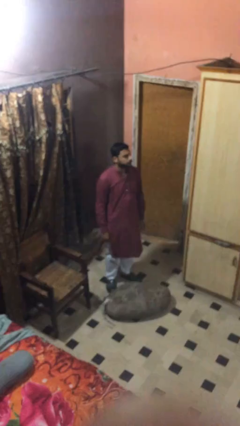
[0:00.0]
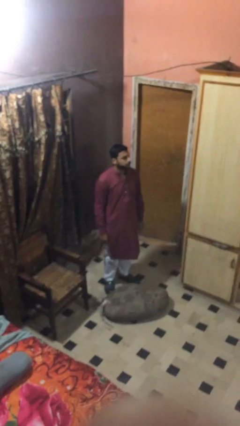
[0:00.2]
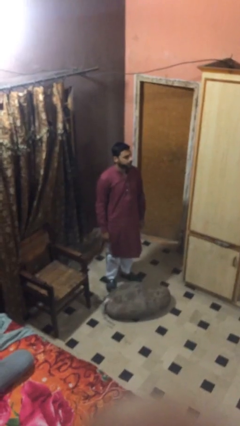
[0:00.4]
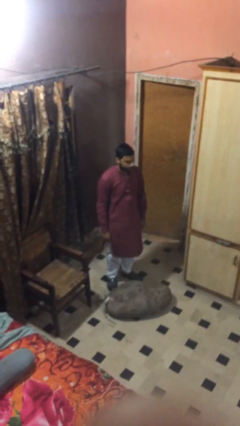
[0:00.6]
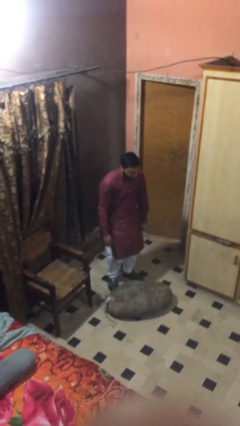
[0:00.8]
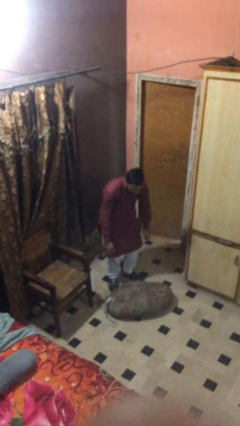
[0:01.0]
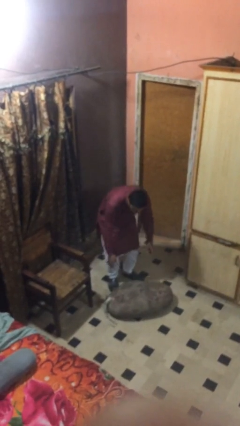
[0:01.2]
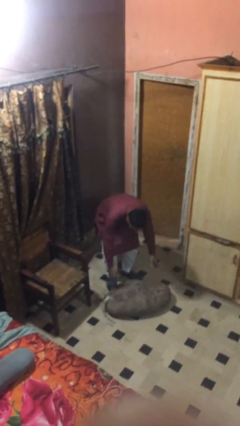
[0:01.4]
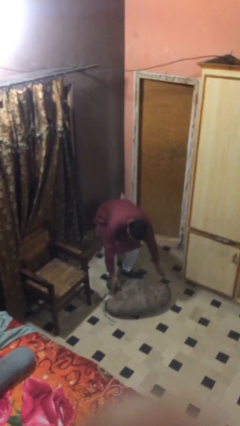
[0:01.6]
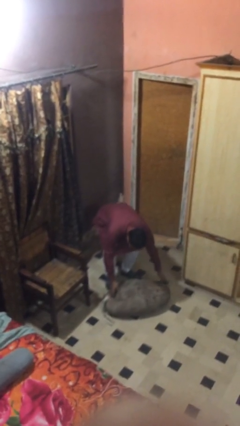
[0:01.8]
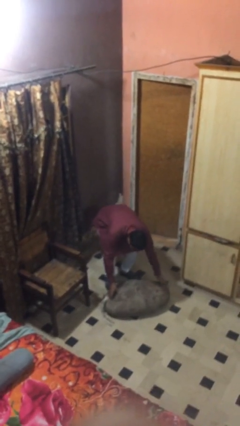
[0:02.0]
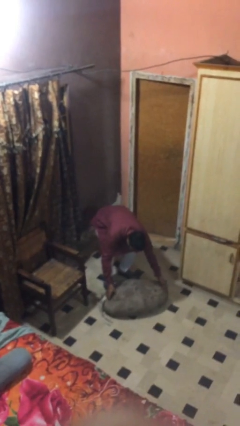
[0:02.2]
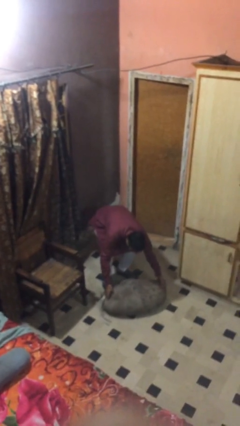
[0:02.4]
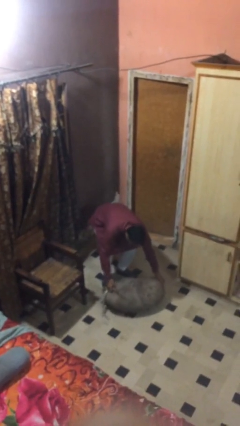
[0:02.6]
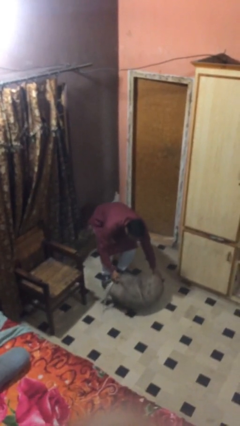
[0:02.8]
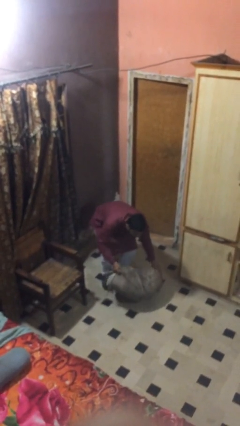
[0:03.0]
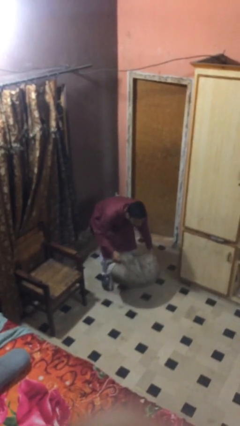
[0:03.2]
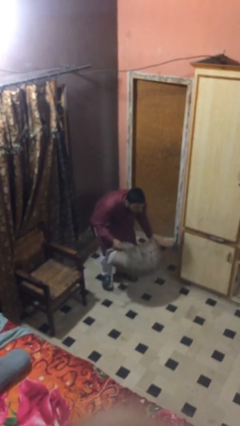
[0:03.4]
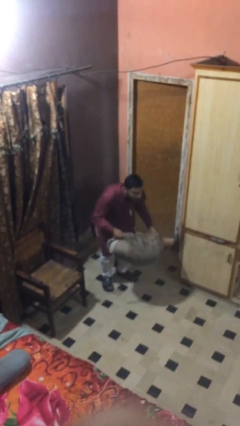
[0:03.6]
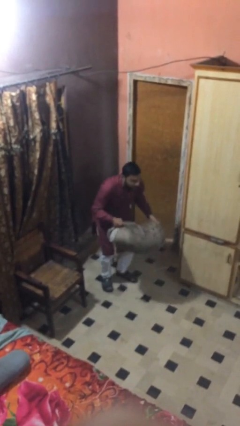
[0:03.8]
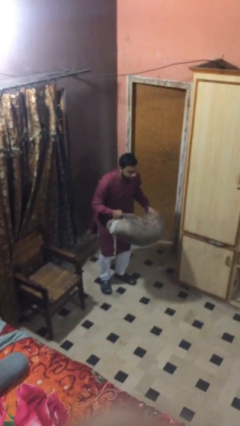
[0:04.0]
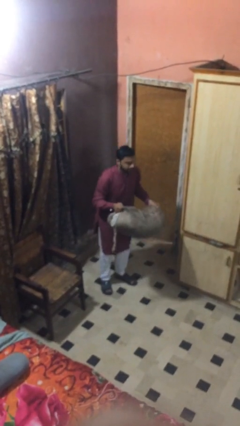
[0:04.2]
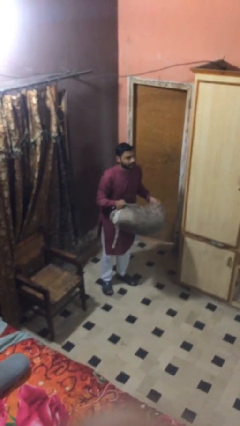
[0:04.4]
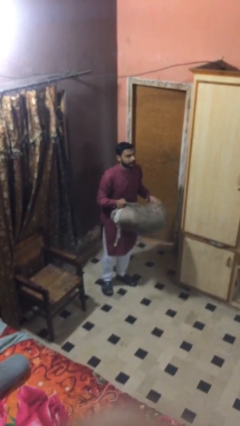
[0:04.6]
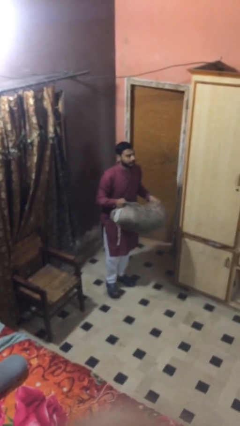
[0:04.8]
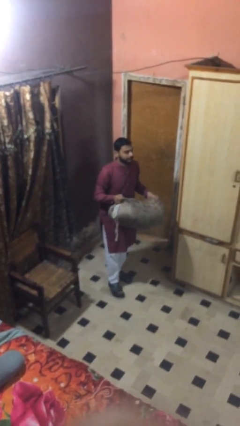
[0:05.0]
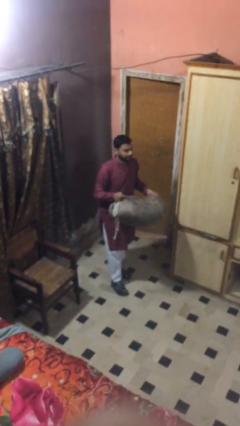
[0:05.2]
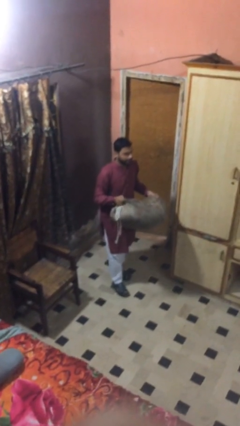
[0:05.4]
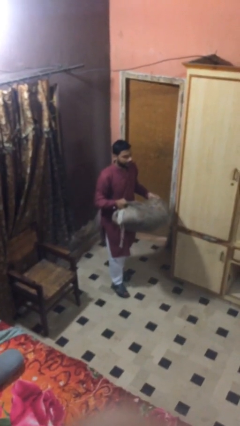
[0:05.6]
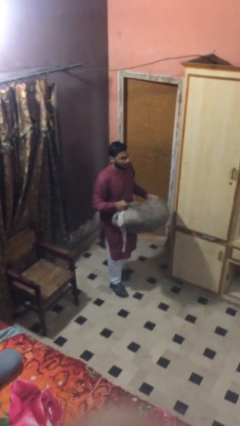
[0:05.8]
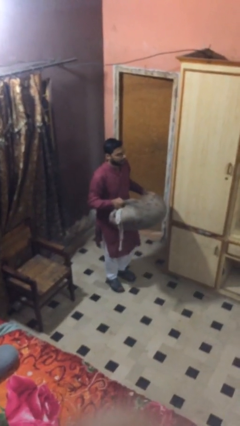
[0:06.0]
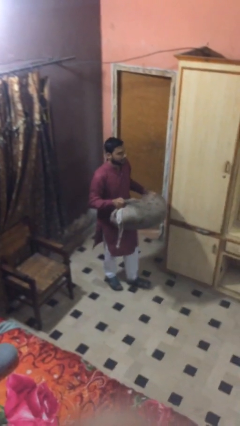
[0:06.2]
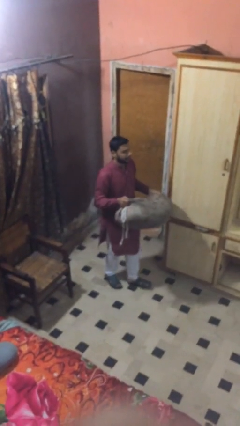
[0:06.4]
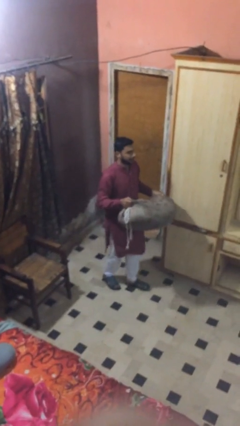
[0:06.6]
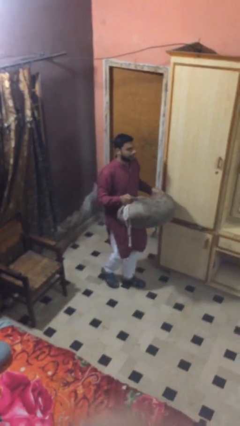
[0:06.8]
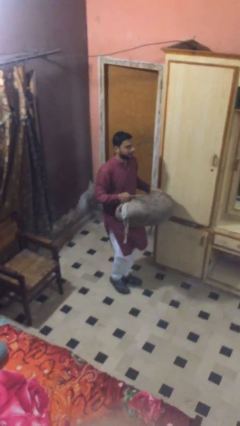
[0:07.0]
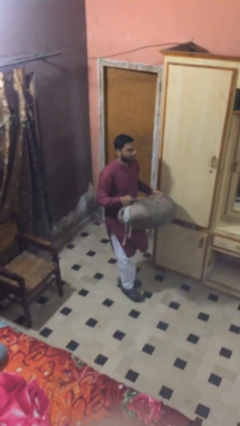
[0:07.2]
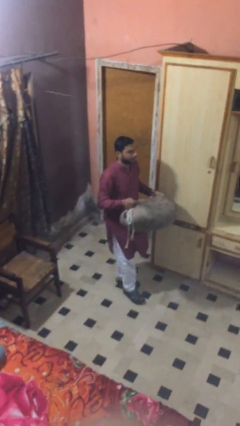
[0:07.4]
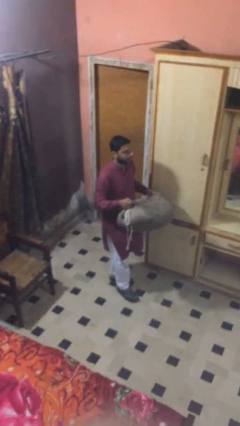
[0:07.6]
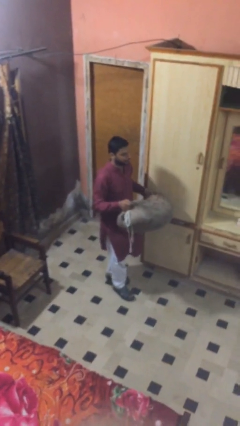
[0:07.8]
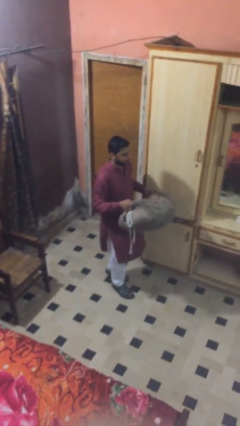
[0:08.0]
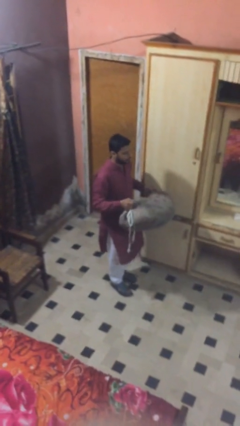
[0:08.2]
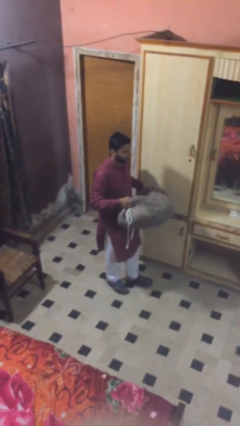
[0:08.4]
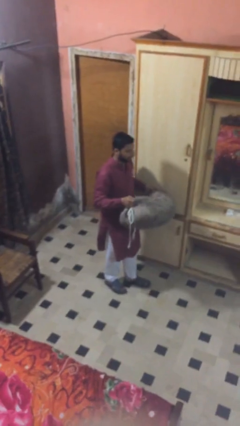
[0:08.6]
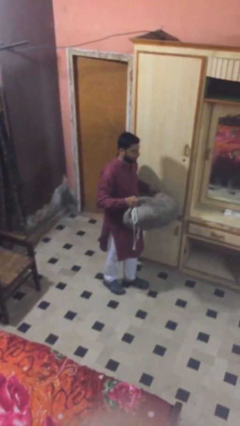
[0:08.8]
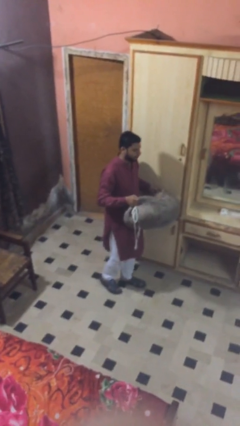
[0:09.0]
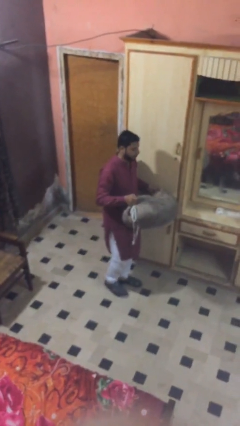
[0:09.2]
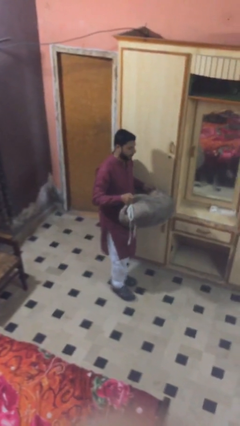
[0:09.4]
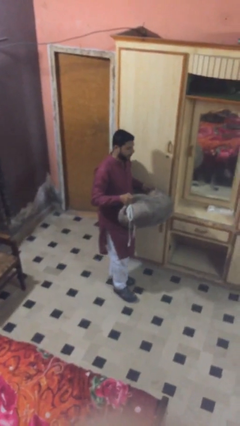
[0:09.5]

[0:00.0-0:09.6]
person carries heavy object

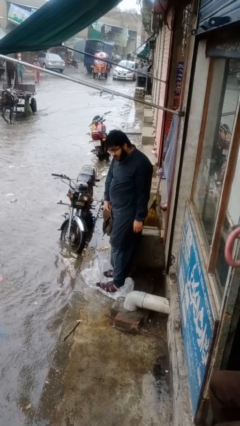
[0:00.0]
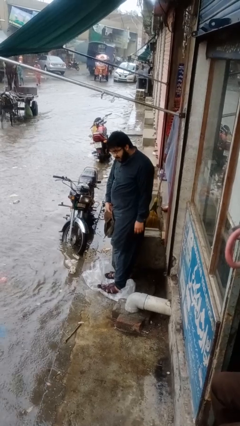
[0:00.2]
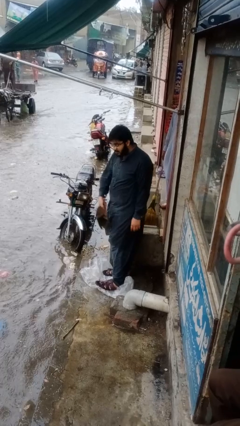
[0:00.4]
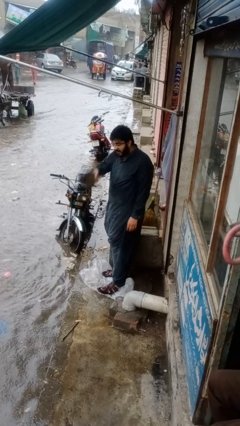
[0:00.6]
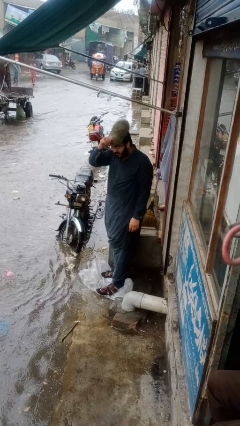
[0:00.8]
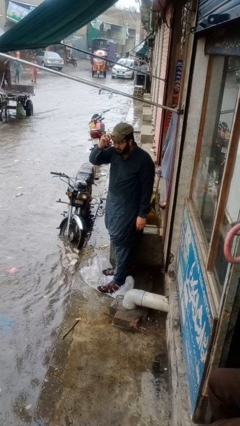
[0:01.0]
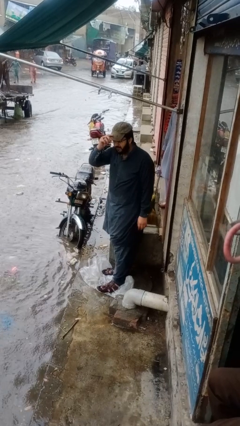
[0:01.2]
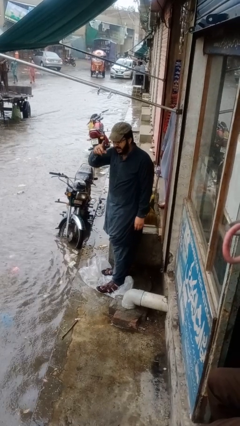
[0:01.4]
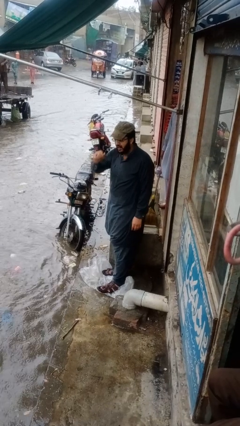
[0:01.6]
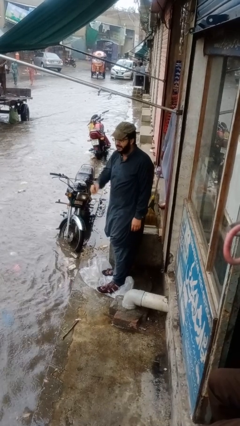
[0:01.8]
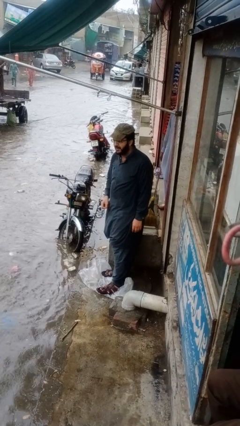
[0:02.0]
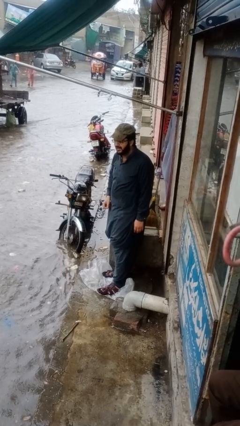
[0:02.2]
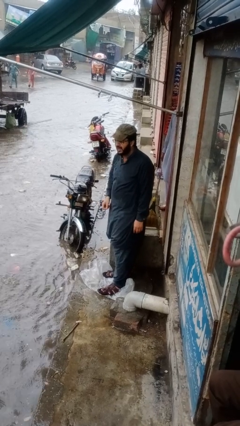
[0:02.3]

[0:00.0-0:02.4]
person puts on hat

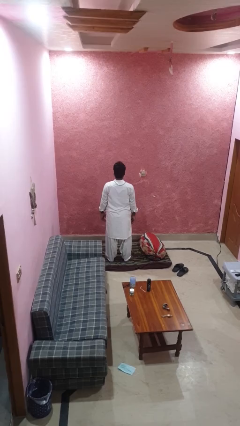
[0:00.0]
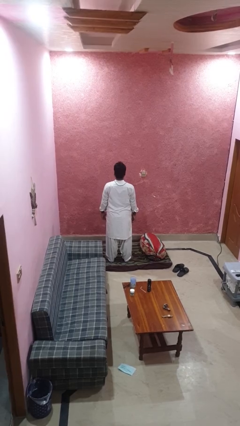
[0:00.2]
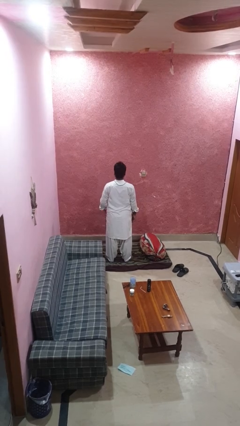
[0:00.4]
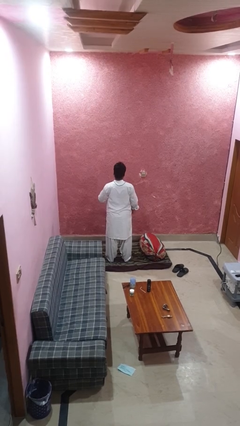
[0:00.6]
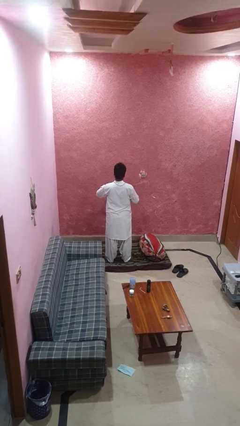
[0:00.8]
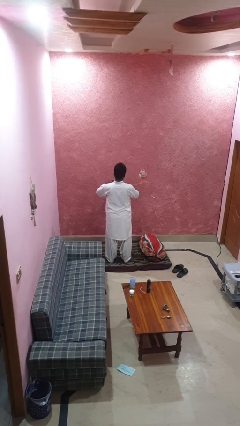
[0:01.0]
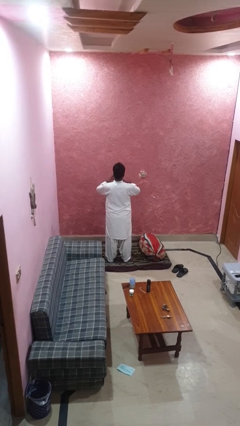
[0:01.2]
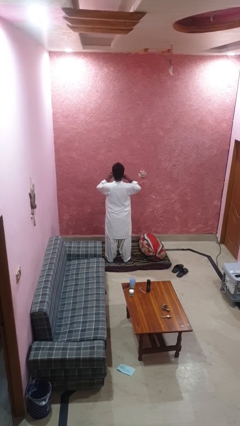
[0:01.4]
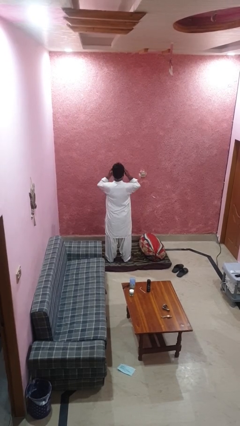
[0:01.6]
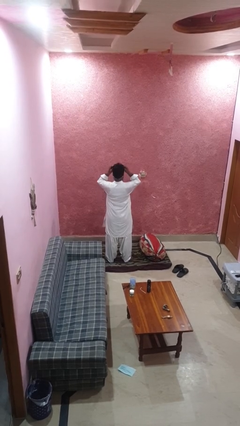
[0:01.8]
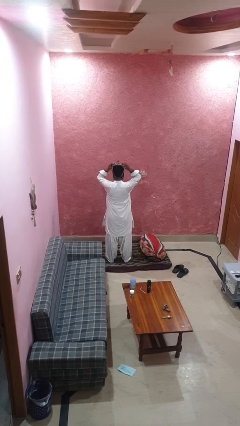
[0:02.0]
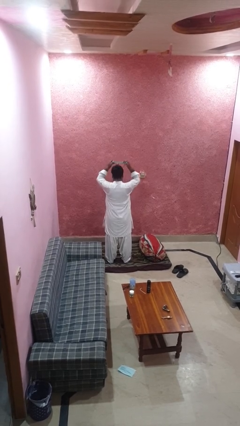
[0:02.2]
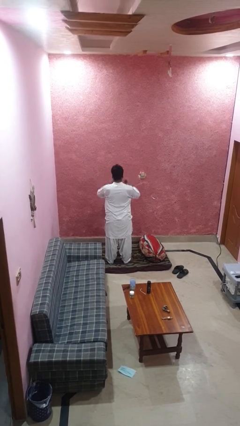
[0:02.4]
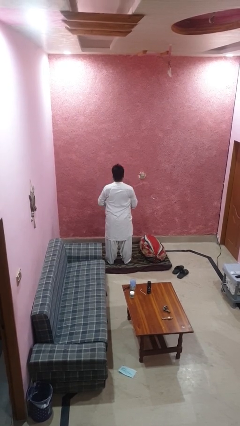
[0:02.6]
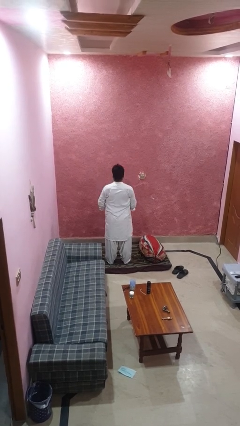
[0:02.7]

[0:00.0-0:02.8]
person takes off necklace

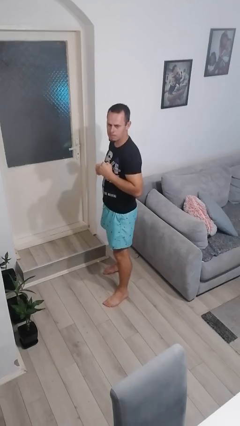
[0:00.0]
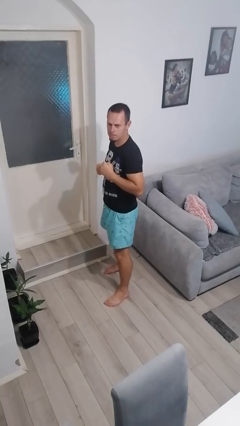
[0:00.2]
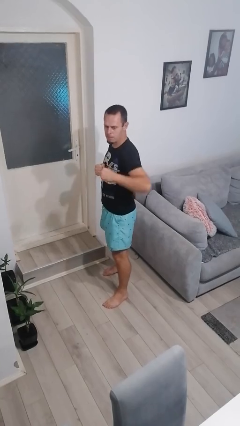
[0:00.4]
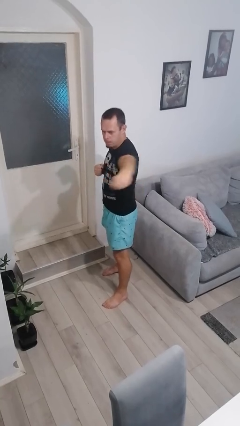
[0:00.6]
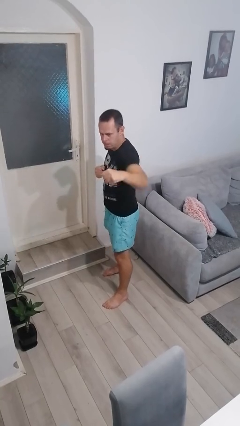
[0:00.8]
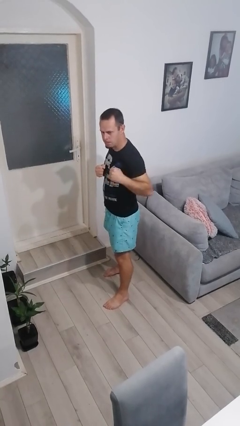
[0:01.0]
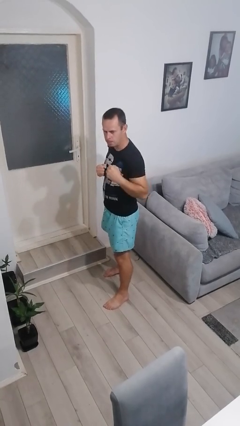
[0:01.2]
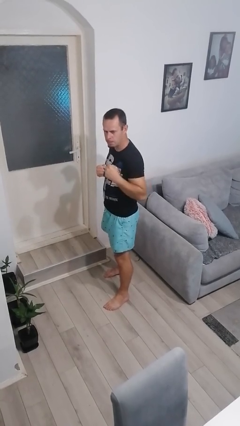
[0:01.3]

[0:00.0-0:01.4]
person karate chop

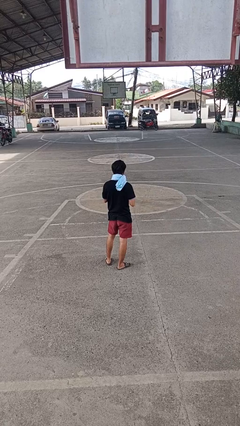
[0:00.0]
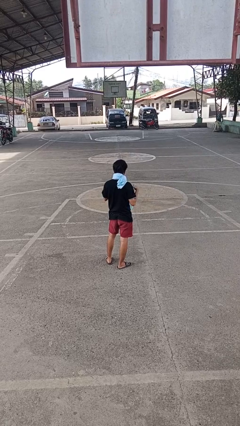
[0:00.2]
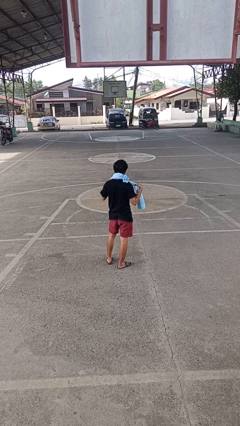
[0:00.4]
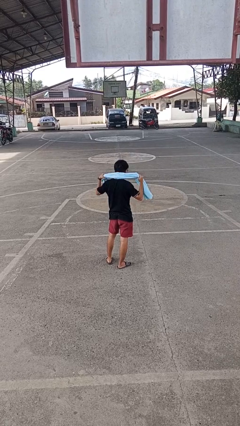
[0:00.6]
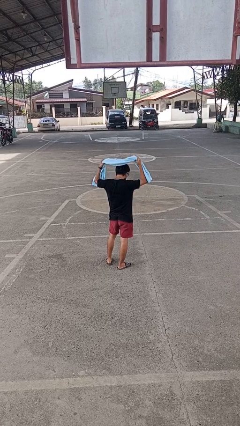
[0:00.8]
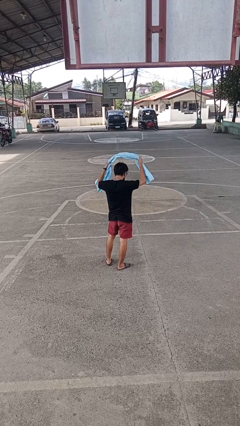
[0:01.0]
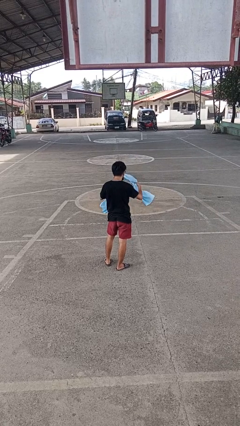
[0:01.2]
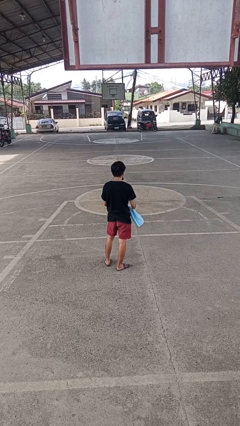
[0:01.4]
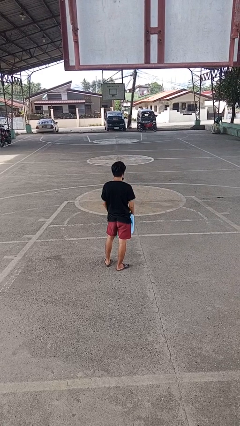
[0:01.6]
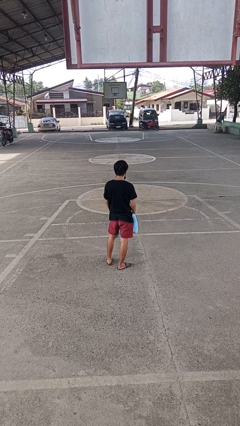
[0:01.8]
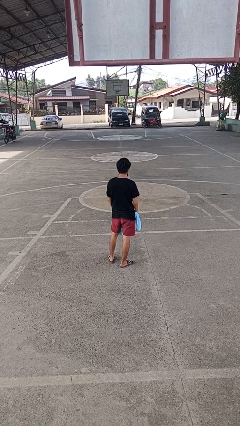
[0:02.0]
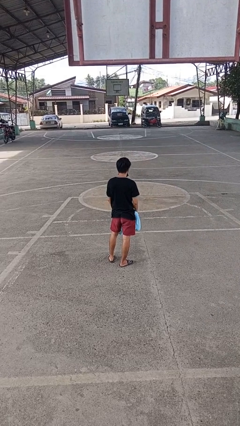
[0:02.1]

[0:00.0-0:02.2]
person takes off scarf
